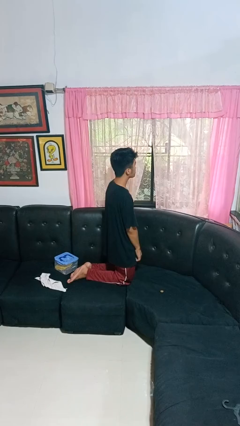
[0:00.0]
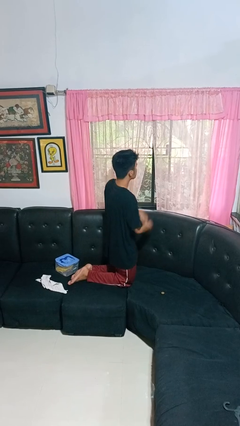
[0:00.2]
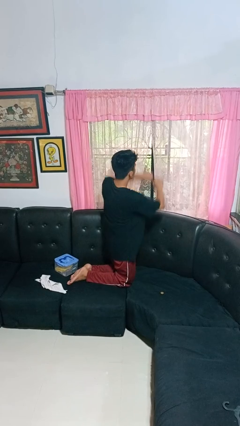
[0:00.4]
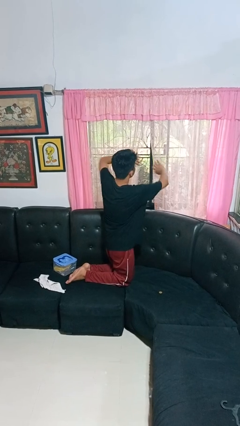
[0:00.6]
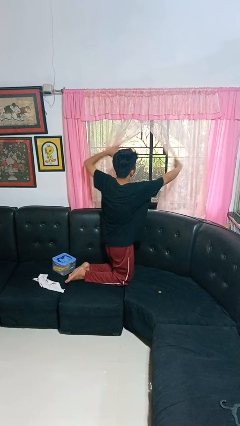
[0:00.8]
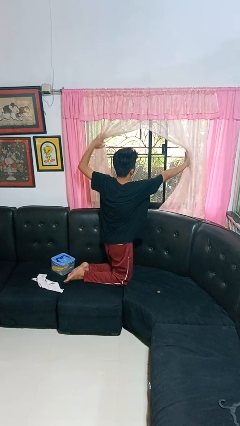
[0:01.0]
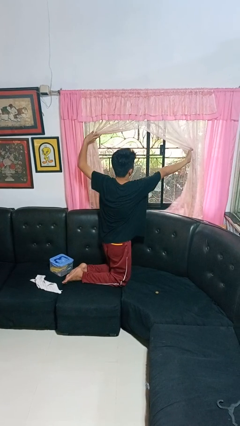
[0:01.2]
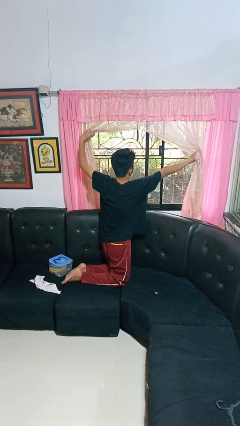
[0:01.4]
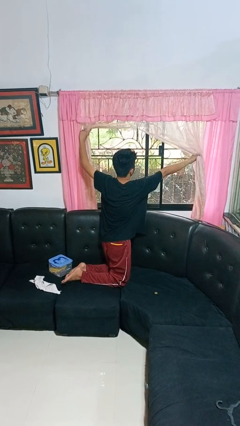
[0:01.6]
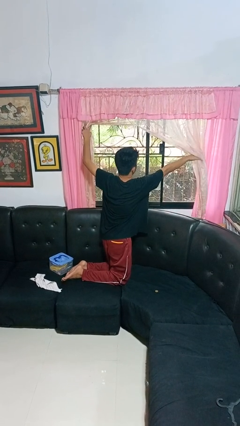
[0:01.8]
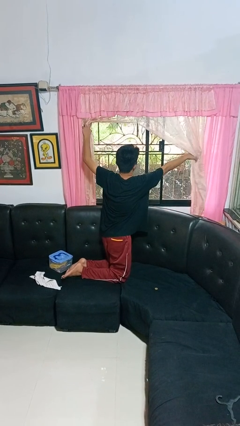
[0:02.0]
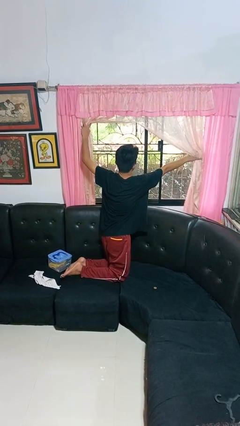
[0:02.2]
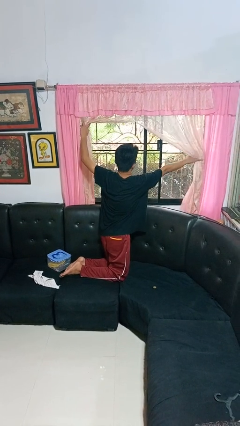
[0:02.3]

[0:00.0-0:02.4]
person opens curtains

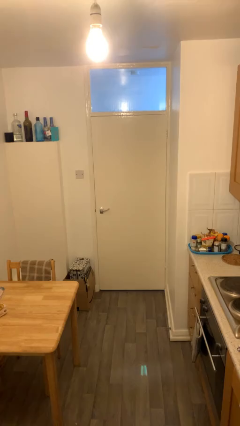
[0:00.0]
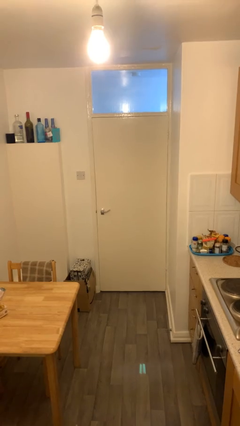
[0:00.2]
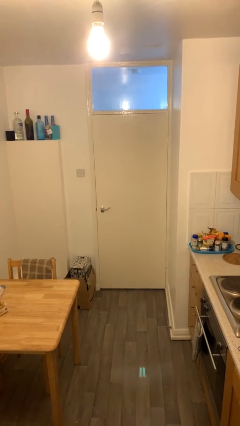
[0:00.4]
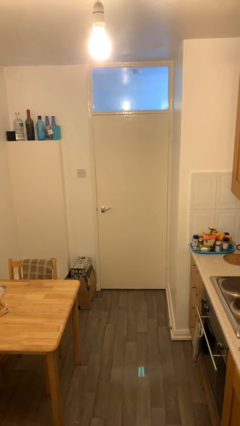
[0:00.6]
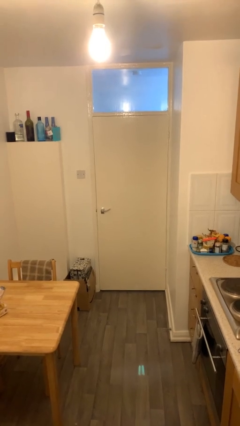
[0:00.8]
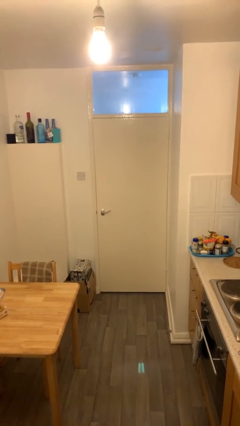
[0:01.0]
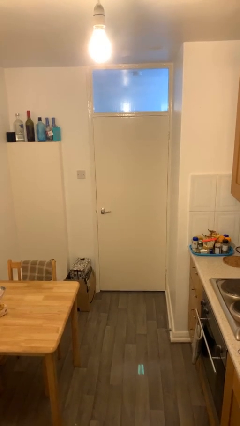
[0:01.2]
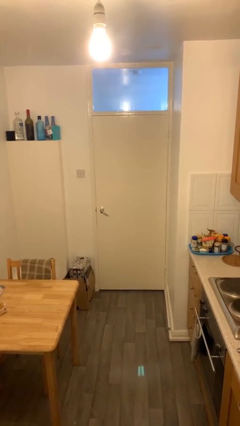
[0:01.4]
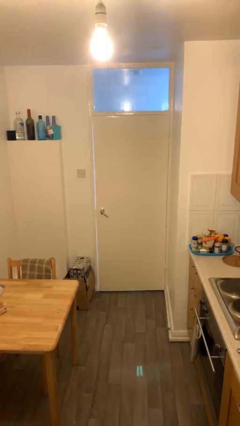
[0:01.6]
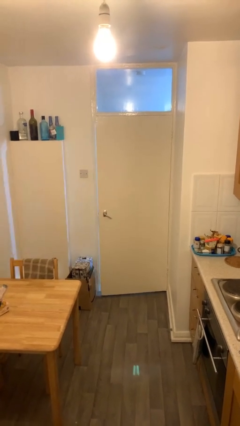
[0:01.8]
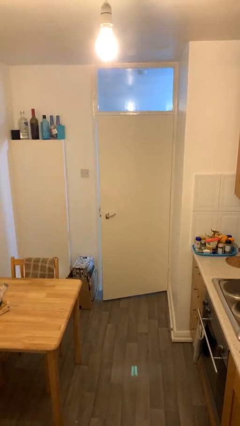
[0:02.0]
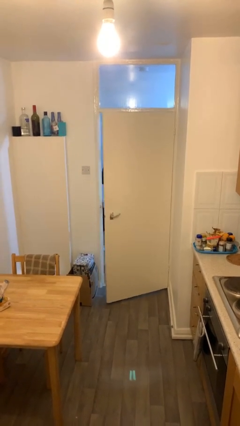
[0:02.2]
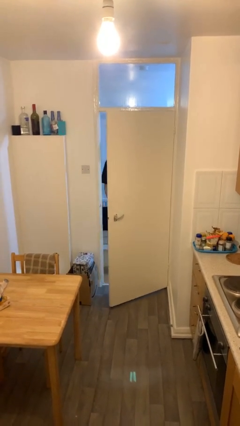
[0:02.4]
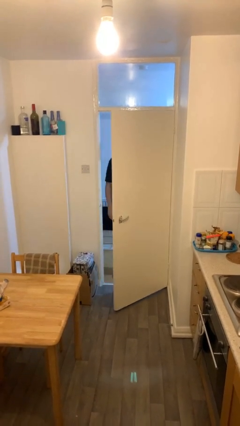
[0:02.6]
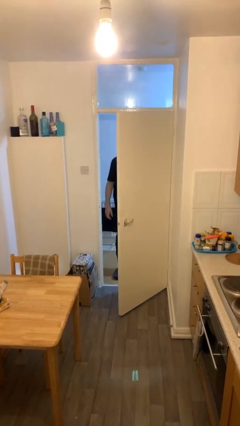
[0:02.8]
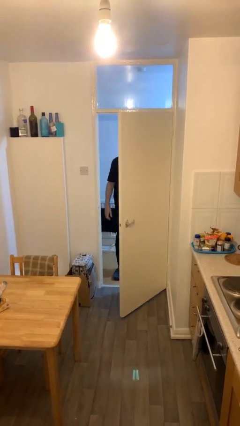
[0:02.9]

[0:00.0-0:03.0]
person opens facility door

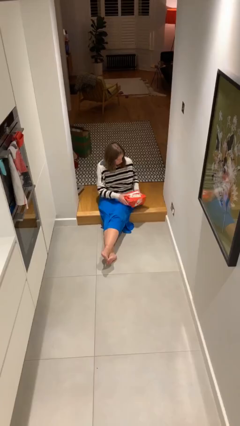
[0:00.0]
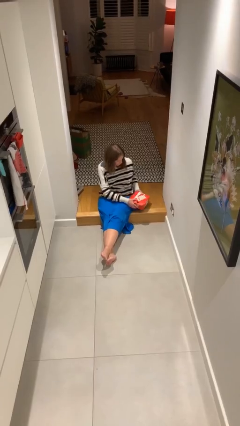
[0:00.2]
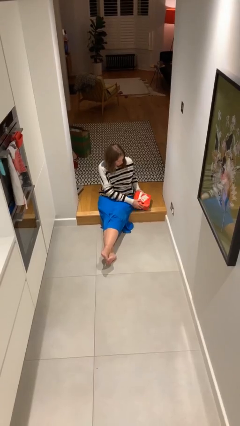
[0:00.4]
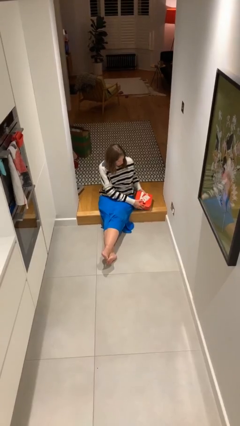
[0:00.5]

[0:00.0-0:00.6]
person puts down object on floor

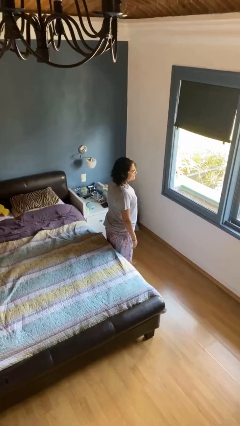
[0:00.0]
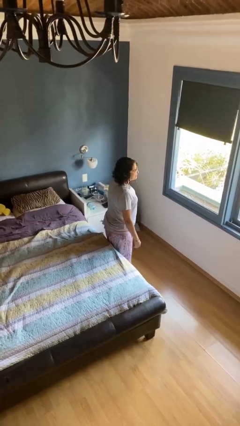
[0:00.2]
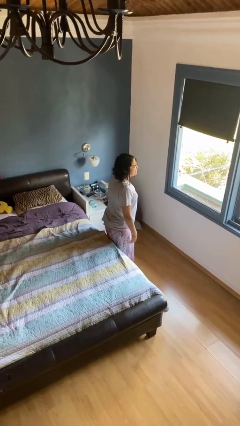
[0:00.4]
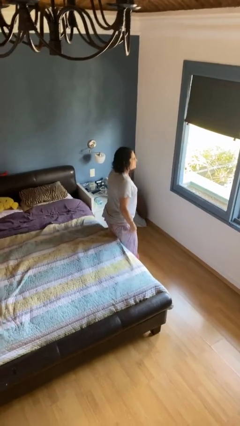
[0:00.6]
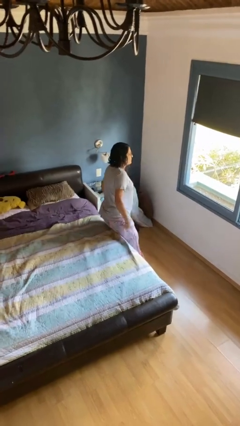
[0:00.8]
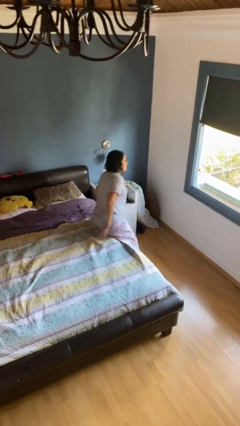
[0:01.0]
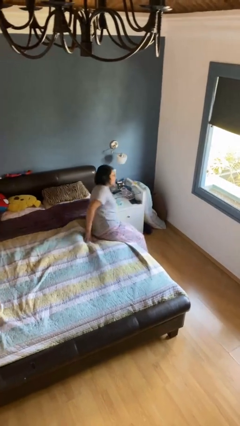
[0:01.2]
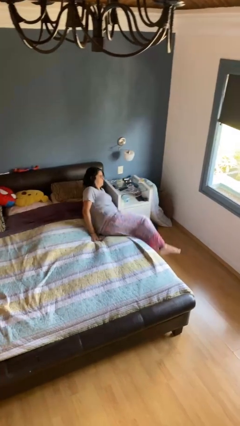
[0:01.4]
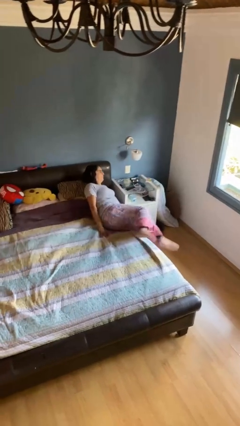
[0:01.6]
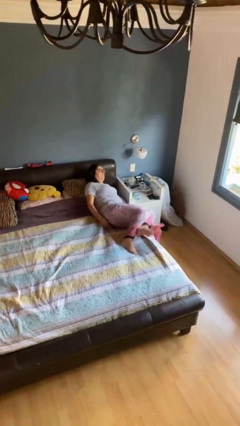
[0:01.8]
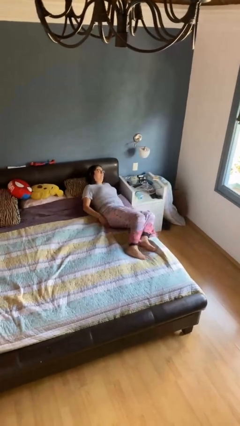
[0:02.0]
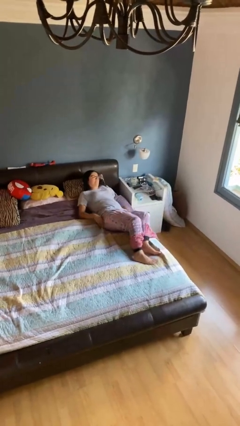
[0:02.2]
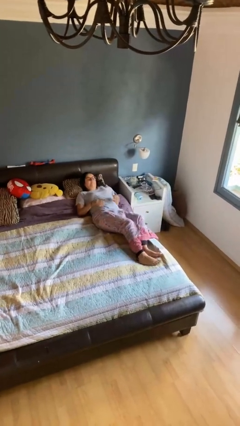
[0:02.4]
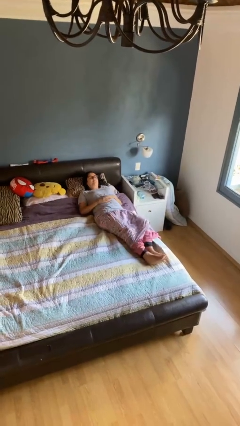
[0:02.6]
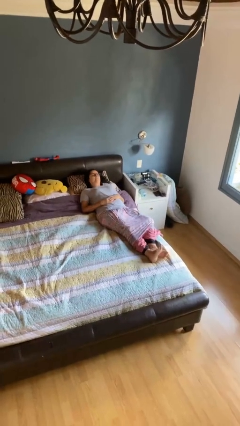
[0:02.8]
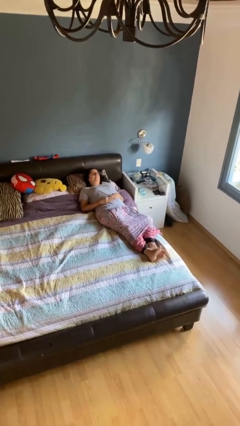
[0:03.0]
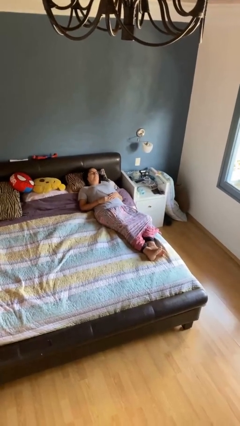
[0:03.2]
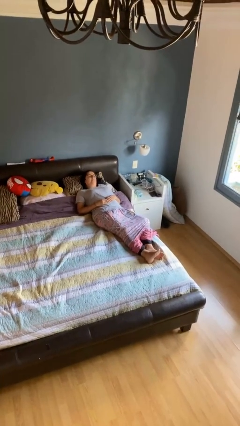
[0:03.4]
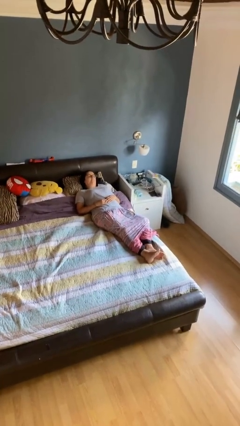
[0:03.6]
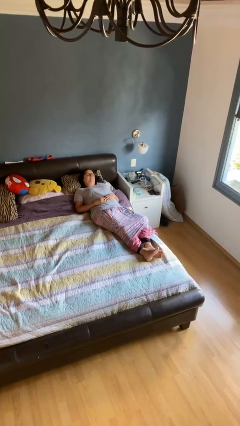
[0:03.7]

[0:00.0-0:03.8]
person lies down on bed

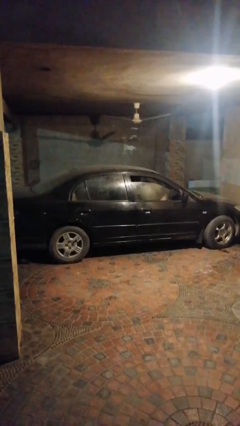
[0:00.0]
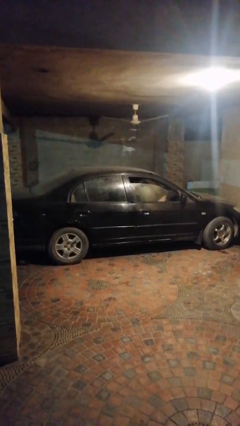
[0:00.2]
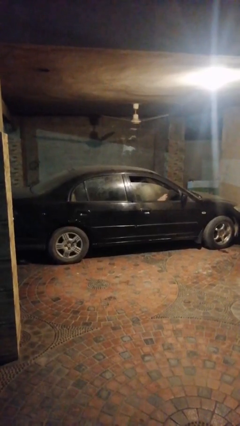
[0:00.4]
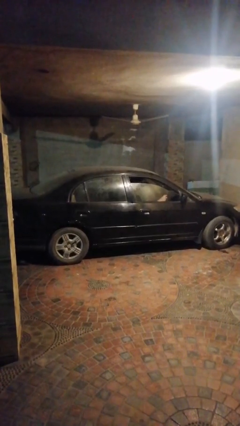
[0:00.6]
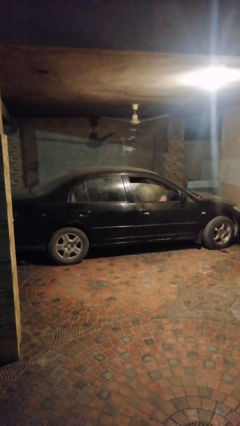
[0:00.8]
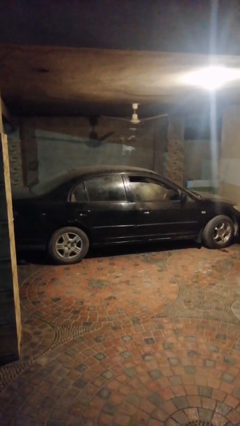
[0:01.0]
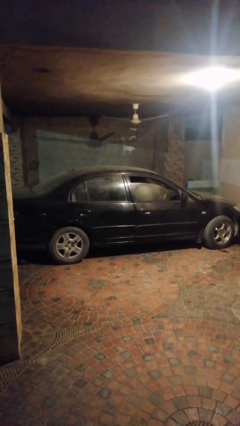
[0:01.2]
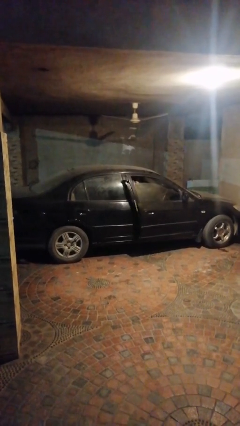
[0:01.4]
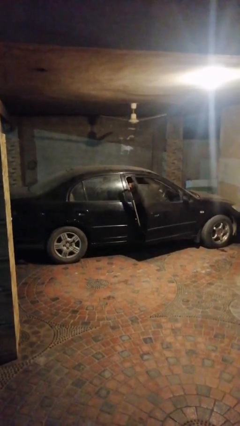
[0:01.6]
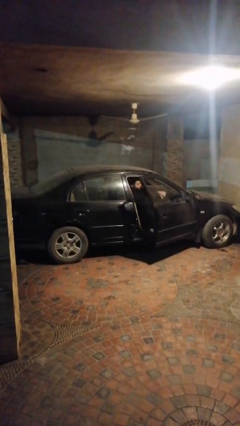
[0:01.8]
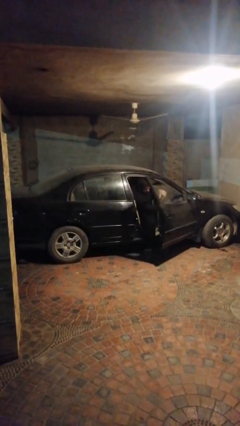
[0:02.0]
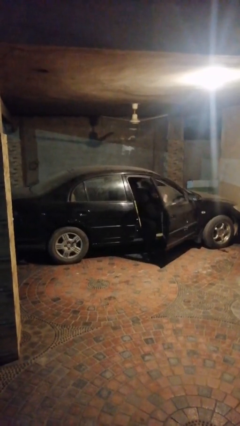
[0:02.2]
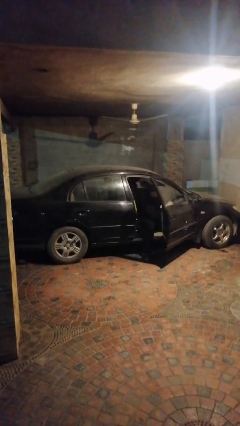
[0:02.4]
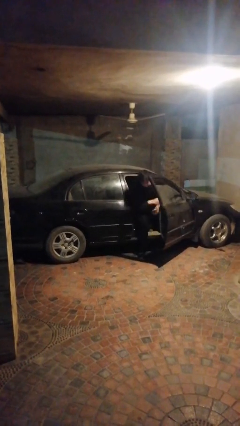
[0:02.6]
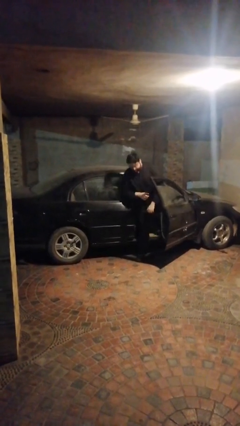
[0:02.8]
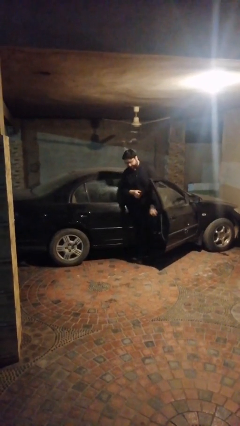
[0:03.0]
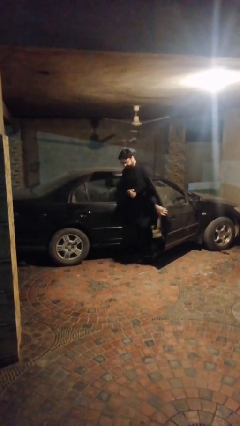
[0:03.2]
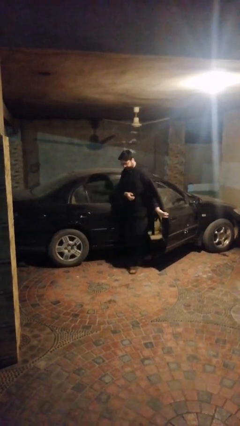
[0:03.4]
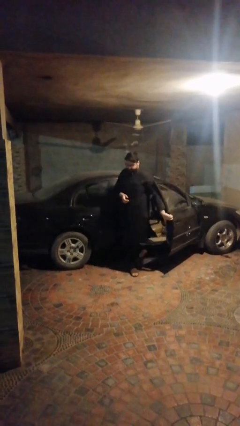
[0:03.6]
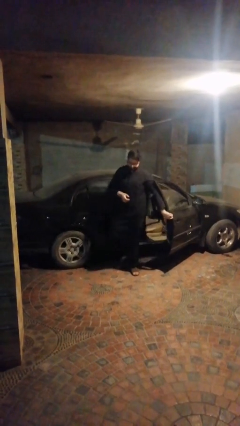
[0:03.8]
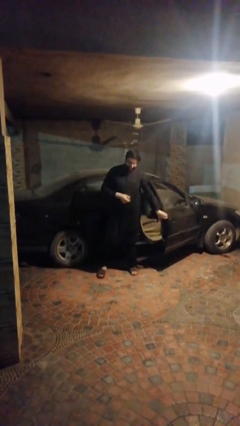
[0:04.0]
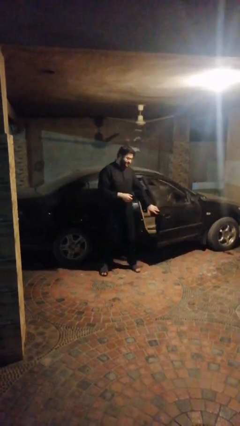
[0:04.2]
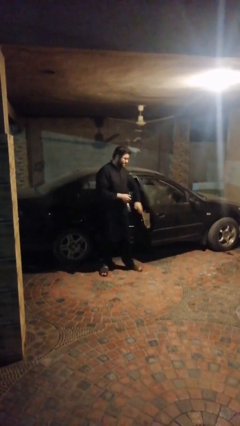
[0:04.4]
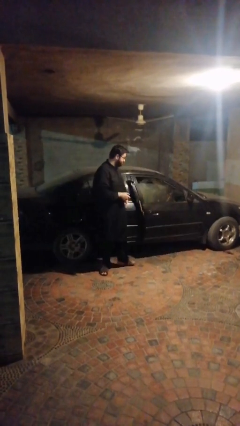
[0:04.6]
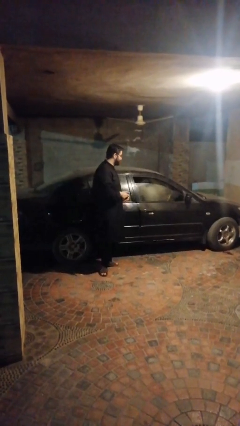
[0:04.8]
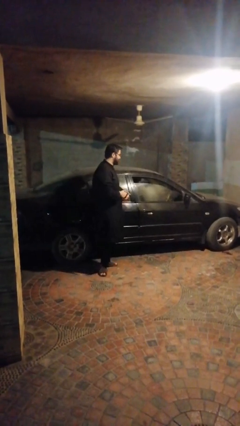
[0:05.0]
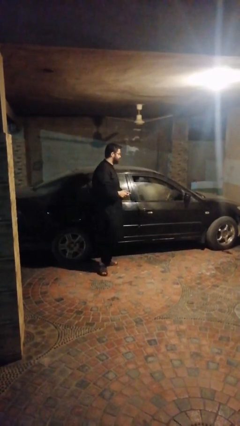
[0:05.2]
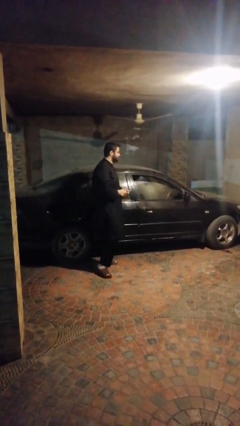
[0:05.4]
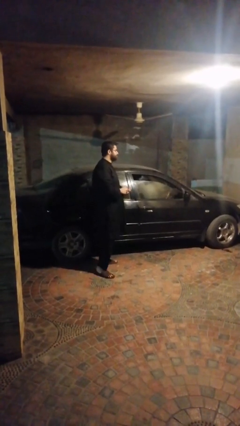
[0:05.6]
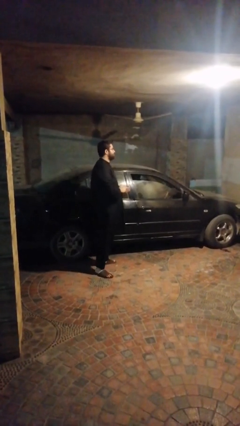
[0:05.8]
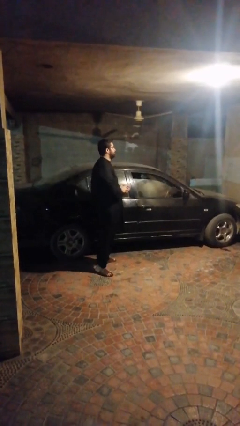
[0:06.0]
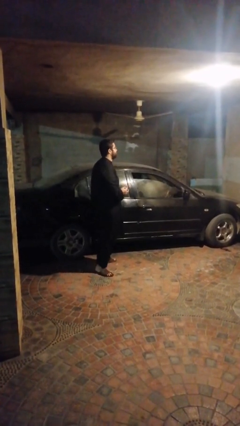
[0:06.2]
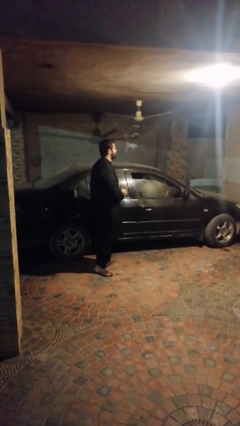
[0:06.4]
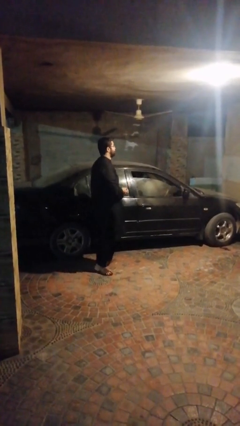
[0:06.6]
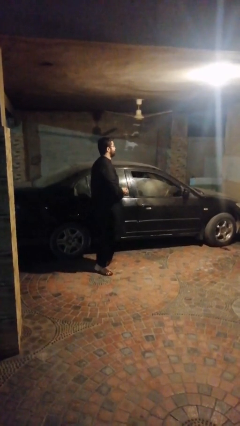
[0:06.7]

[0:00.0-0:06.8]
car drops off person

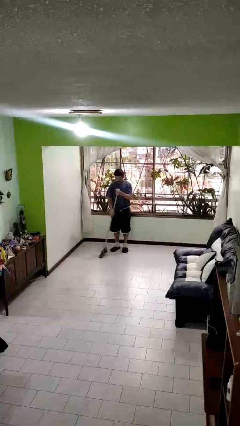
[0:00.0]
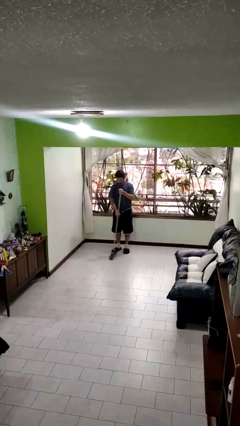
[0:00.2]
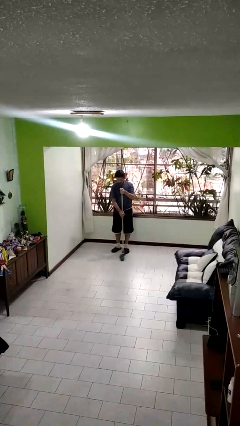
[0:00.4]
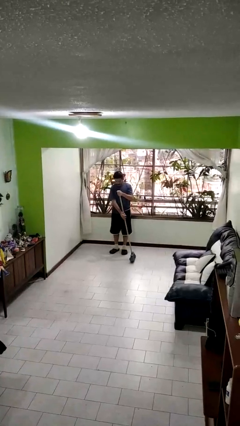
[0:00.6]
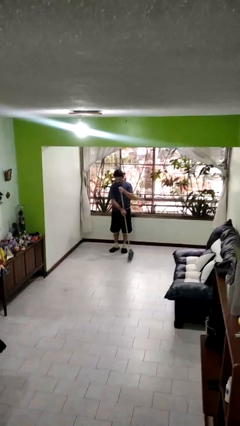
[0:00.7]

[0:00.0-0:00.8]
person sweeps floor
